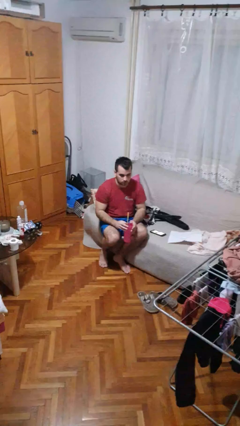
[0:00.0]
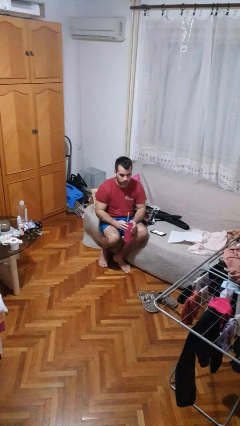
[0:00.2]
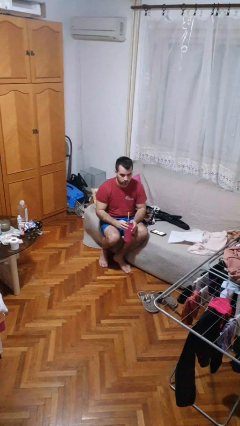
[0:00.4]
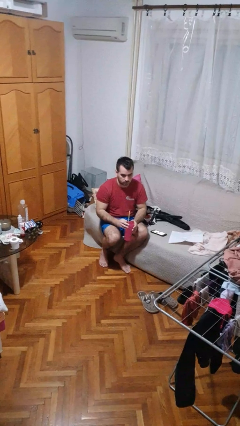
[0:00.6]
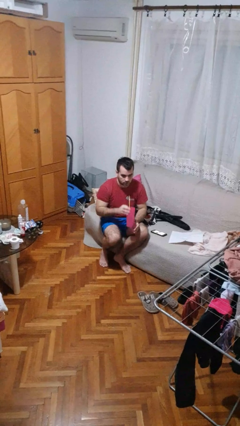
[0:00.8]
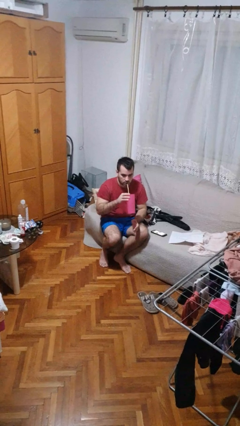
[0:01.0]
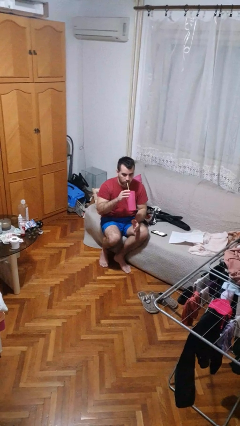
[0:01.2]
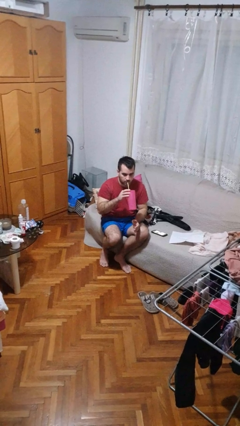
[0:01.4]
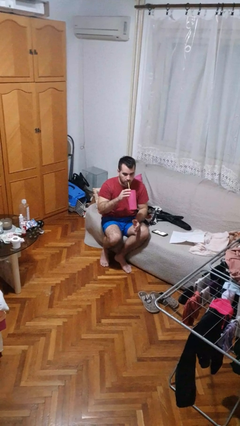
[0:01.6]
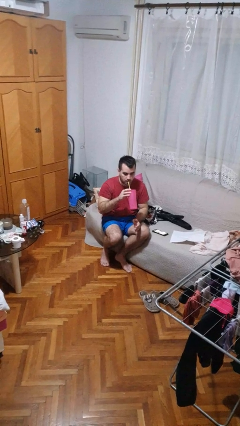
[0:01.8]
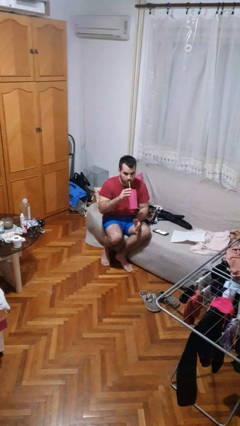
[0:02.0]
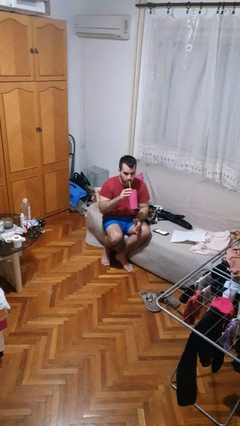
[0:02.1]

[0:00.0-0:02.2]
person drinks from straw

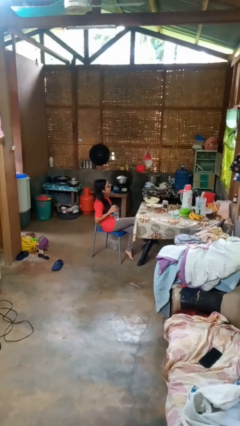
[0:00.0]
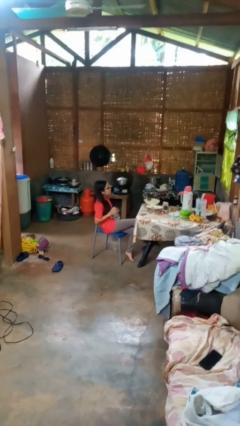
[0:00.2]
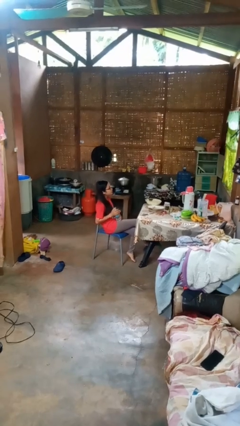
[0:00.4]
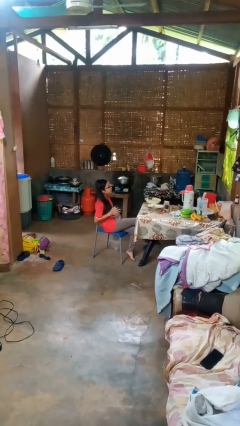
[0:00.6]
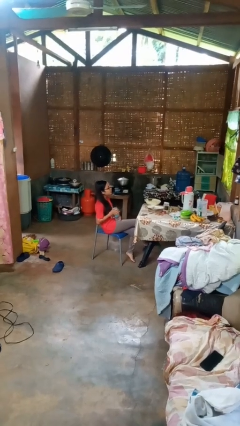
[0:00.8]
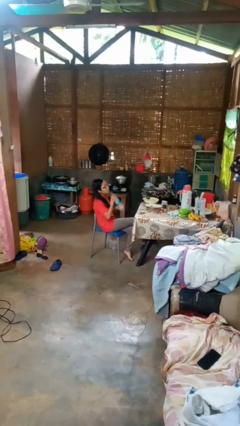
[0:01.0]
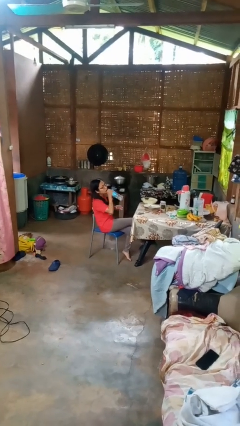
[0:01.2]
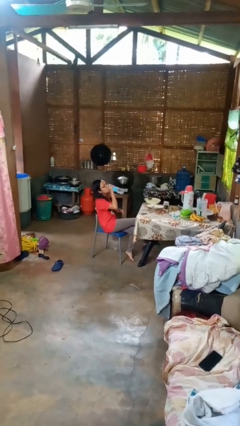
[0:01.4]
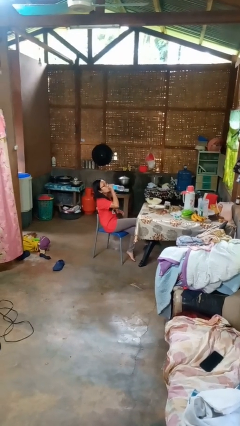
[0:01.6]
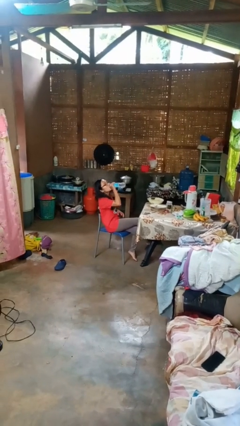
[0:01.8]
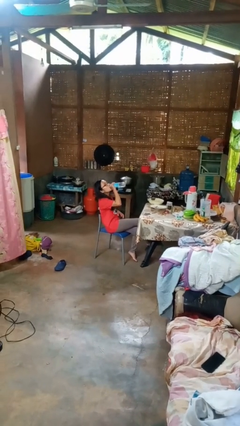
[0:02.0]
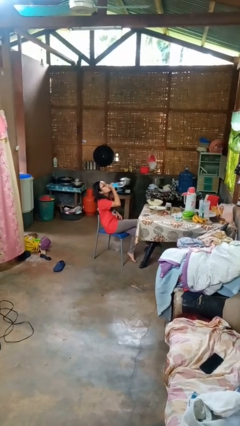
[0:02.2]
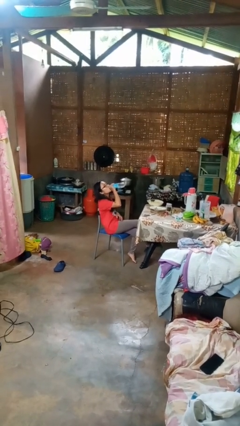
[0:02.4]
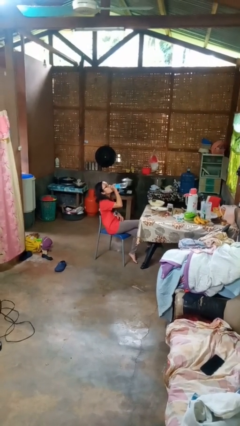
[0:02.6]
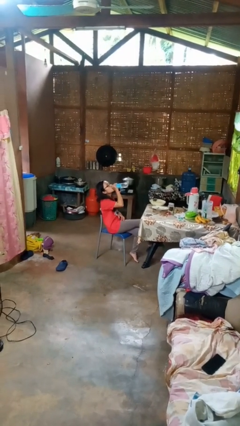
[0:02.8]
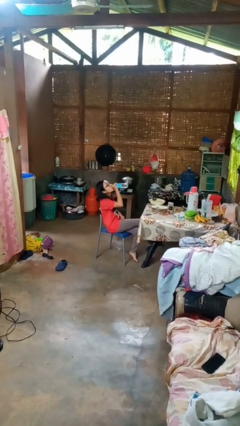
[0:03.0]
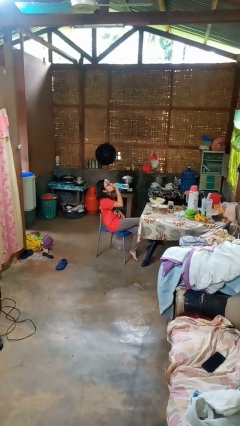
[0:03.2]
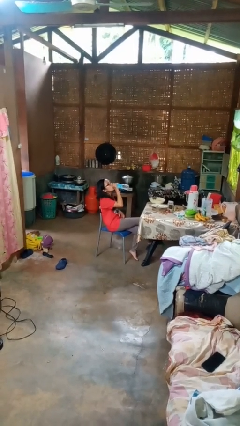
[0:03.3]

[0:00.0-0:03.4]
person drinks from bottle

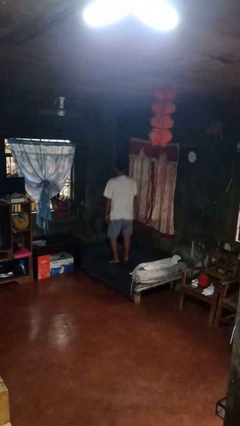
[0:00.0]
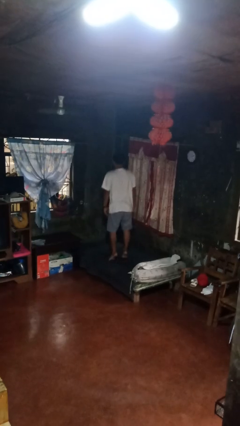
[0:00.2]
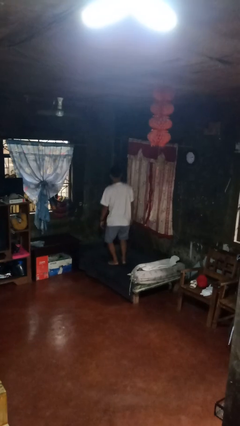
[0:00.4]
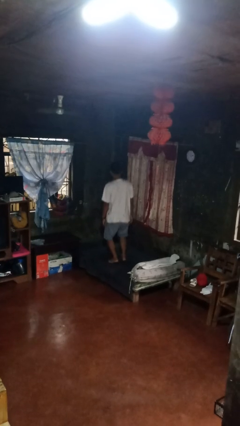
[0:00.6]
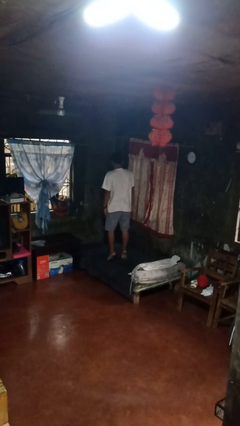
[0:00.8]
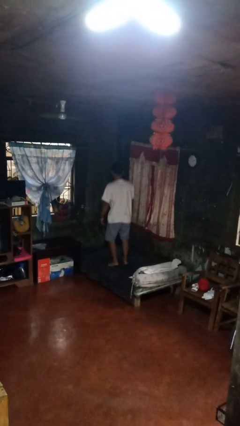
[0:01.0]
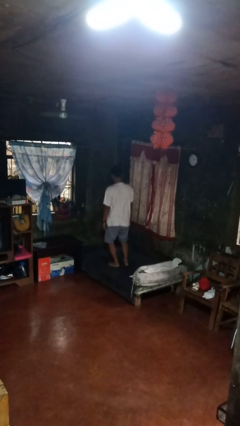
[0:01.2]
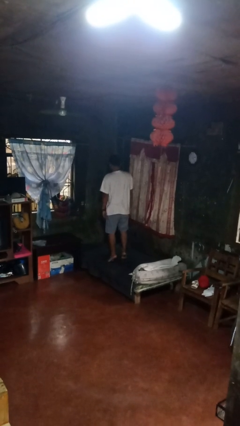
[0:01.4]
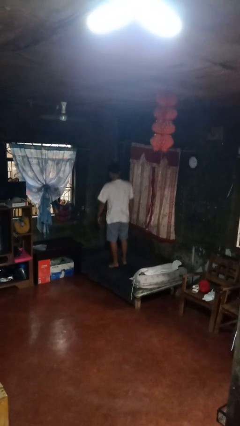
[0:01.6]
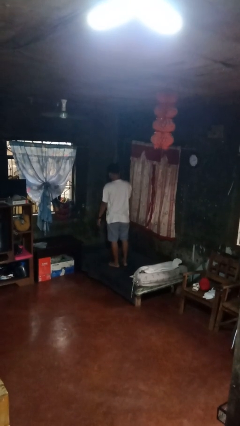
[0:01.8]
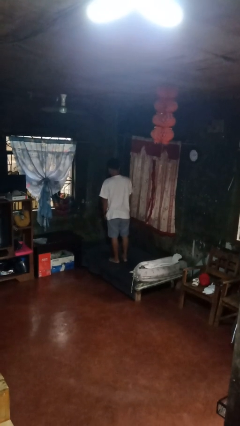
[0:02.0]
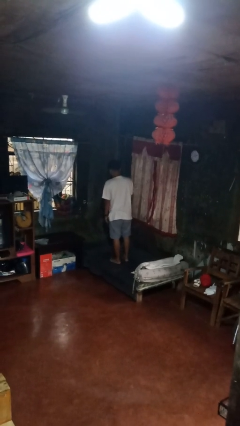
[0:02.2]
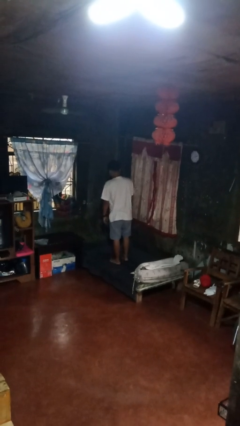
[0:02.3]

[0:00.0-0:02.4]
person jumps on bed

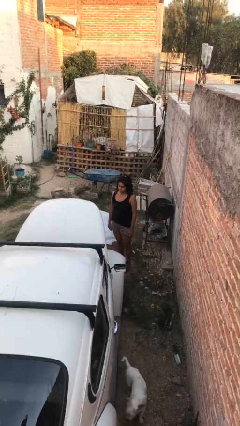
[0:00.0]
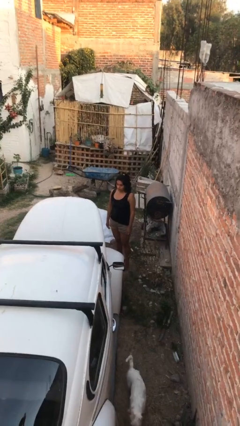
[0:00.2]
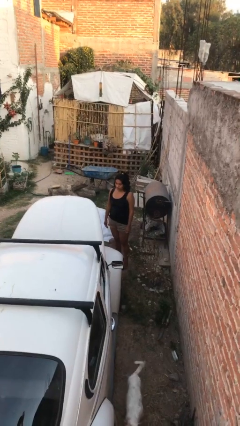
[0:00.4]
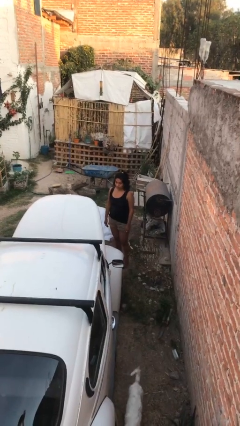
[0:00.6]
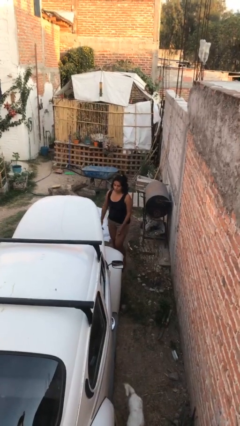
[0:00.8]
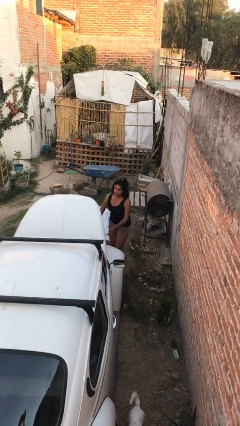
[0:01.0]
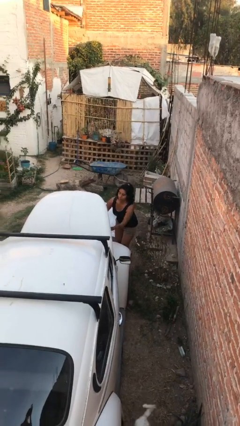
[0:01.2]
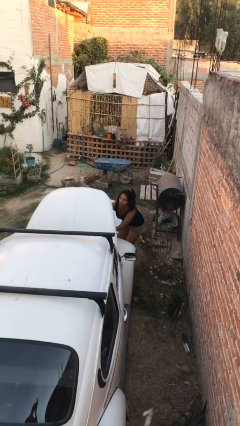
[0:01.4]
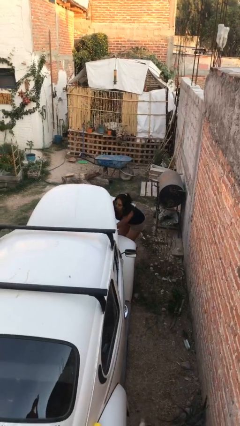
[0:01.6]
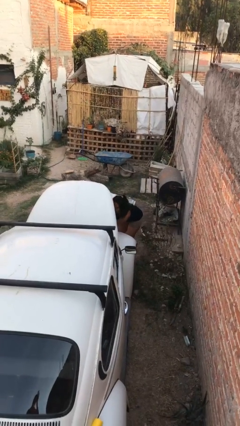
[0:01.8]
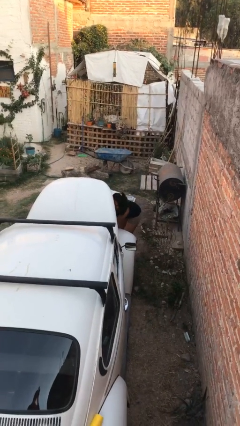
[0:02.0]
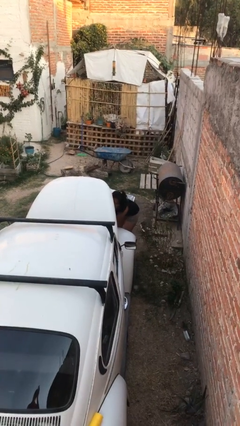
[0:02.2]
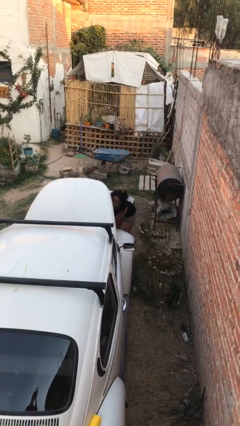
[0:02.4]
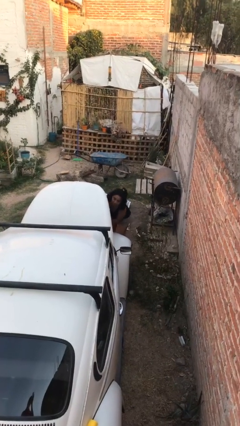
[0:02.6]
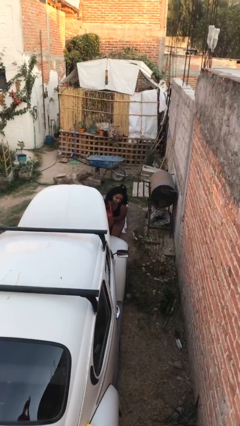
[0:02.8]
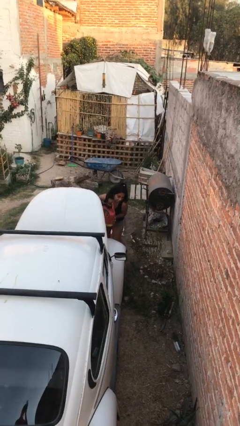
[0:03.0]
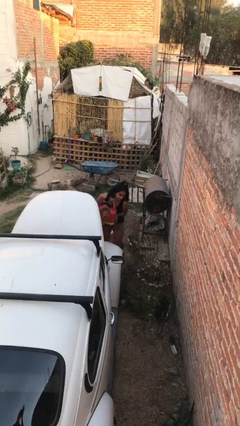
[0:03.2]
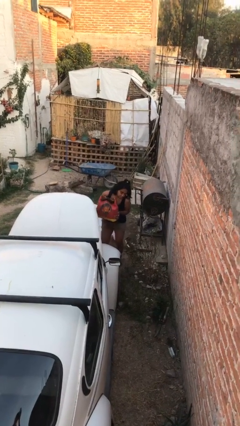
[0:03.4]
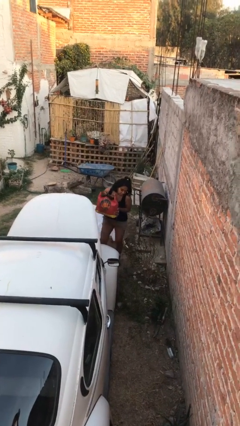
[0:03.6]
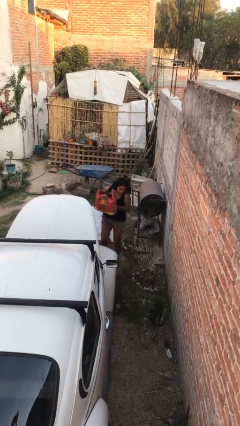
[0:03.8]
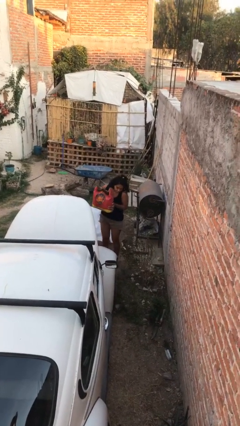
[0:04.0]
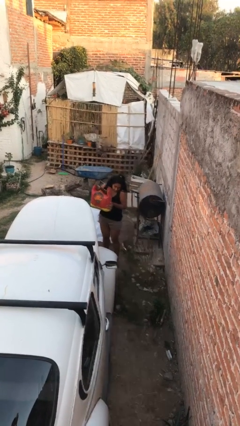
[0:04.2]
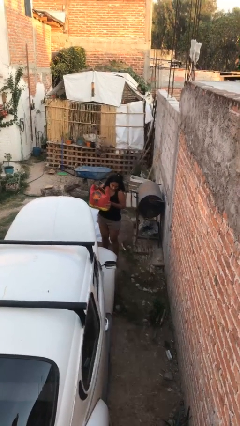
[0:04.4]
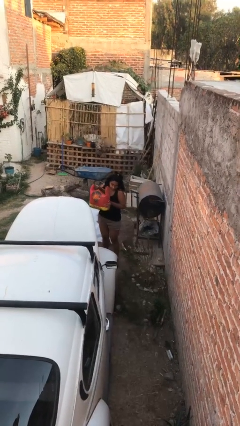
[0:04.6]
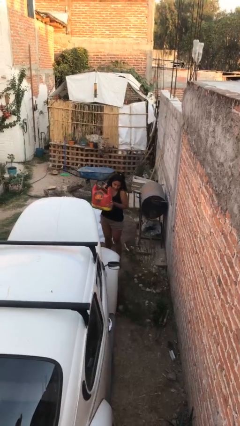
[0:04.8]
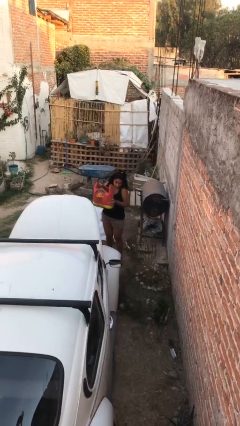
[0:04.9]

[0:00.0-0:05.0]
person unloads car

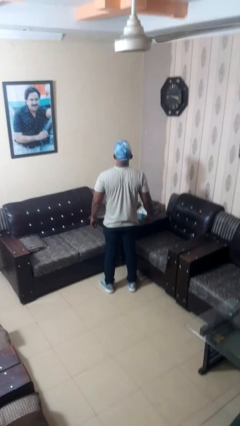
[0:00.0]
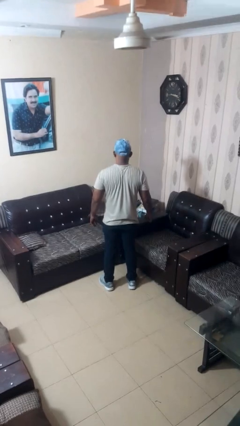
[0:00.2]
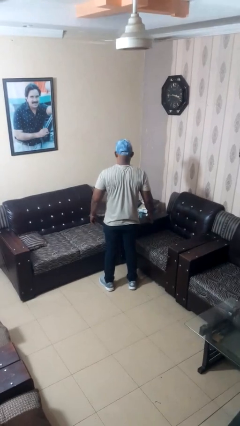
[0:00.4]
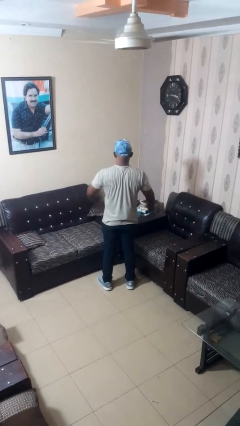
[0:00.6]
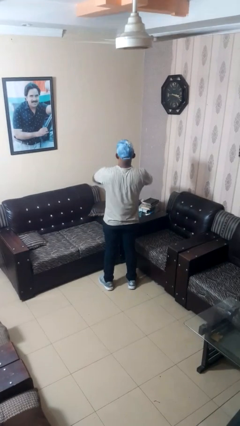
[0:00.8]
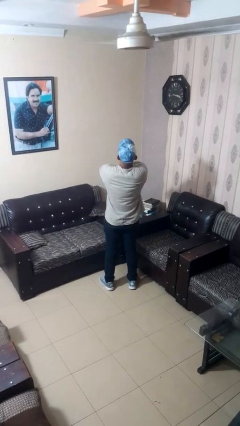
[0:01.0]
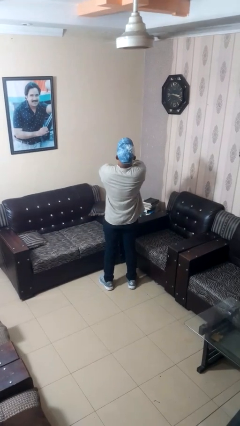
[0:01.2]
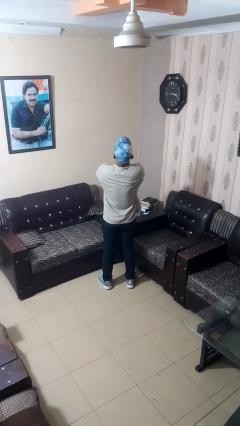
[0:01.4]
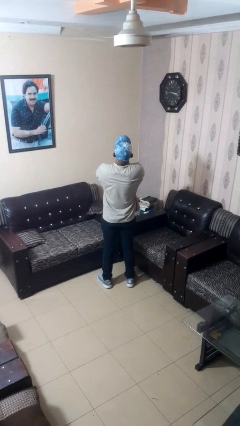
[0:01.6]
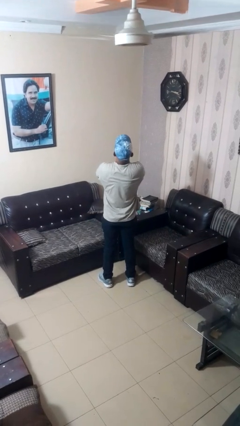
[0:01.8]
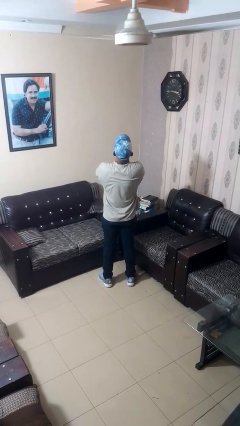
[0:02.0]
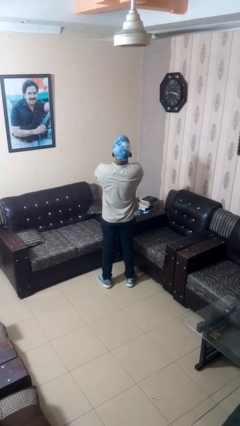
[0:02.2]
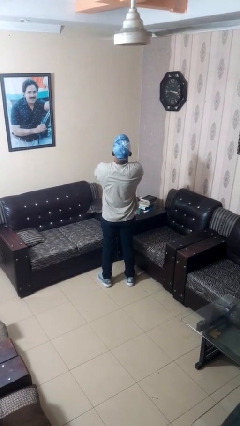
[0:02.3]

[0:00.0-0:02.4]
person crosses arms

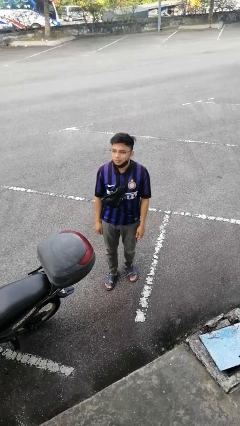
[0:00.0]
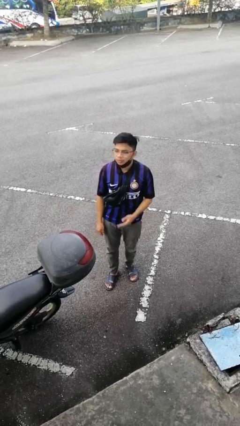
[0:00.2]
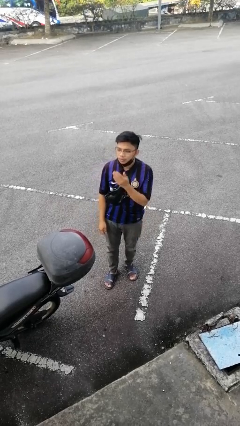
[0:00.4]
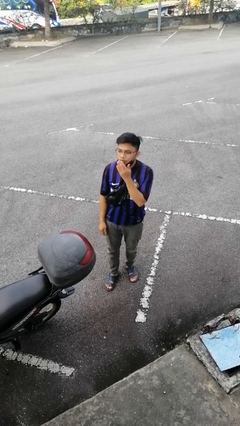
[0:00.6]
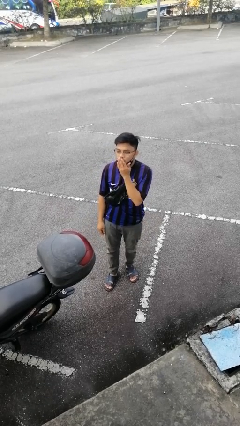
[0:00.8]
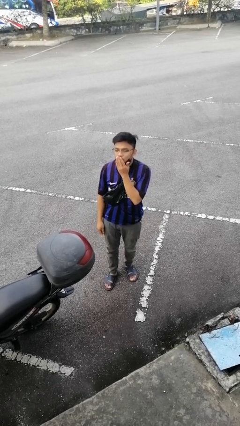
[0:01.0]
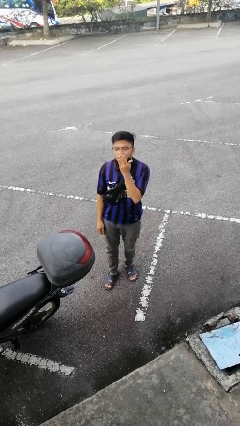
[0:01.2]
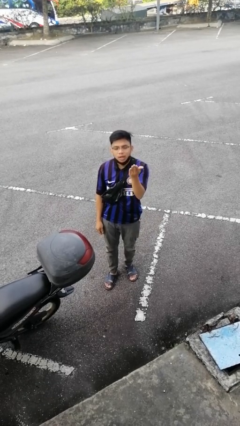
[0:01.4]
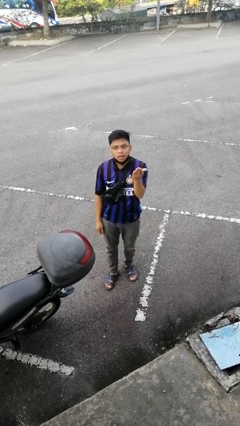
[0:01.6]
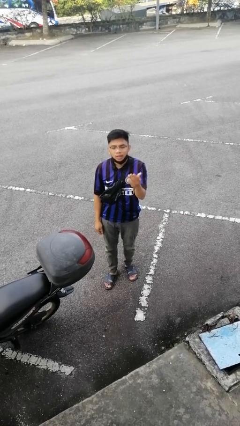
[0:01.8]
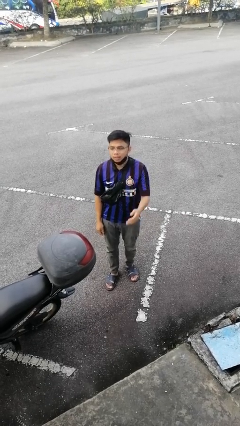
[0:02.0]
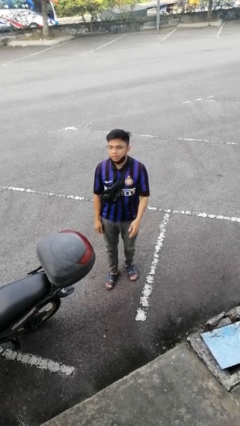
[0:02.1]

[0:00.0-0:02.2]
person gestures blow kiss
